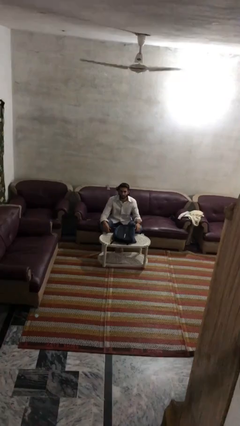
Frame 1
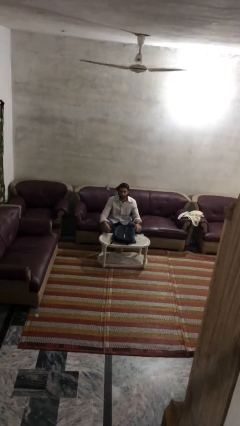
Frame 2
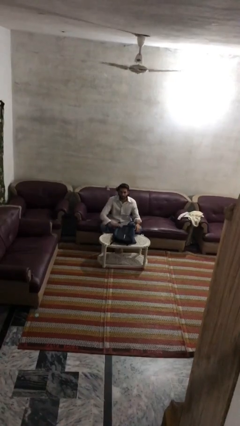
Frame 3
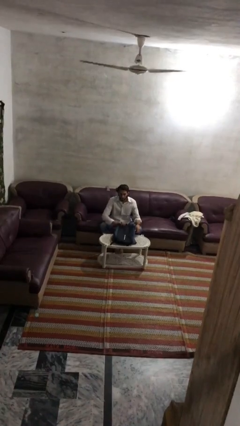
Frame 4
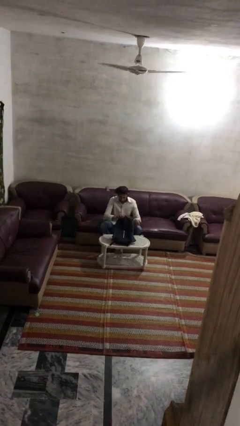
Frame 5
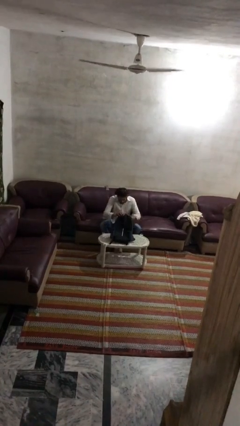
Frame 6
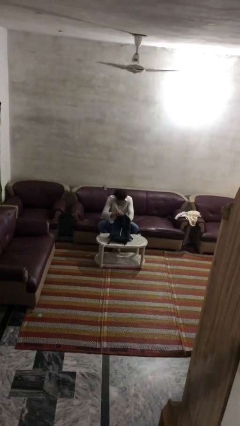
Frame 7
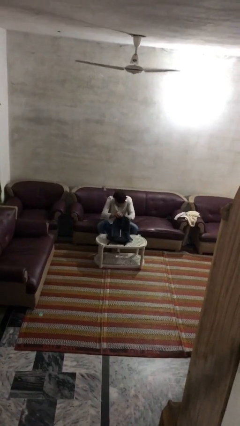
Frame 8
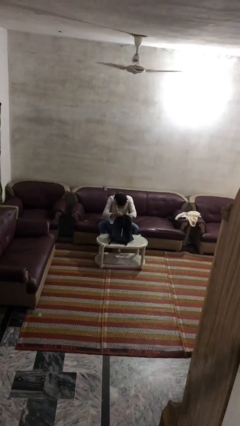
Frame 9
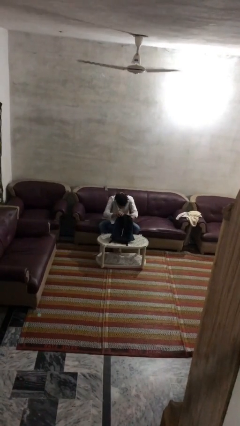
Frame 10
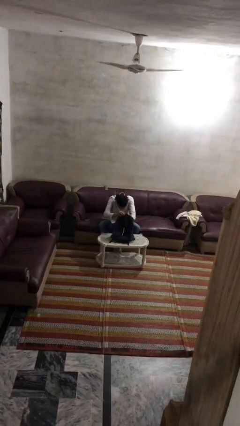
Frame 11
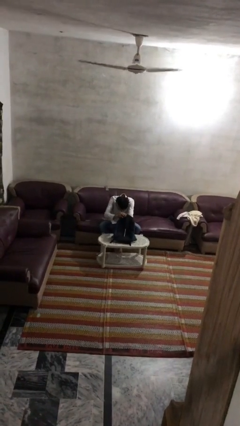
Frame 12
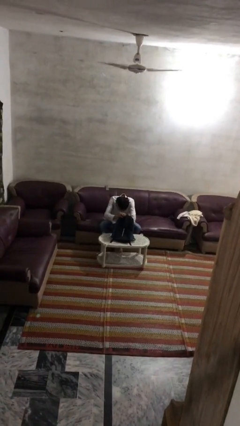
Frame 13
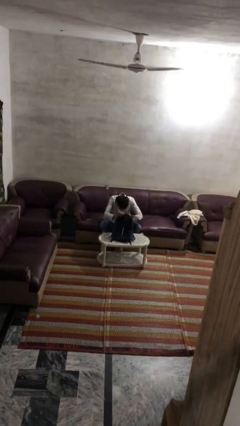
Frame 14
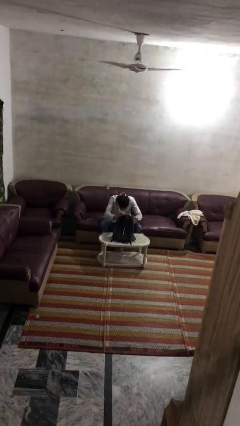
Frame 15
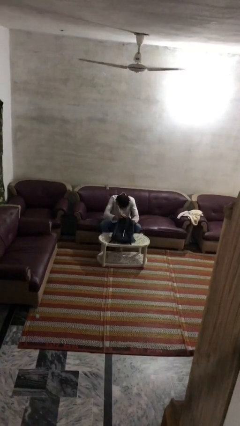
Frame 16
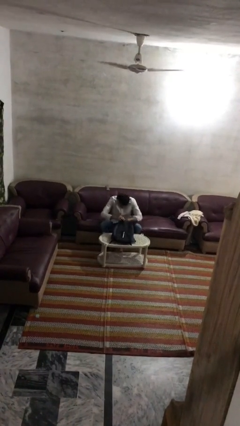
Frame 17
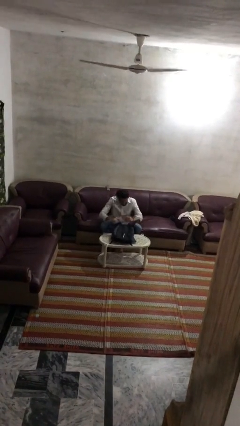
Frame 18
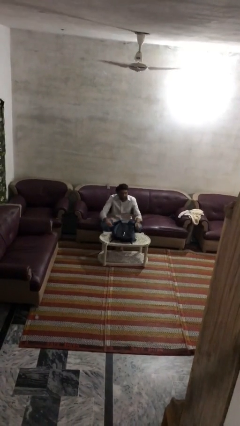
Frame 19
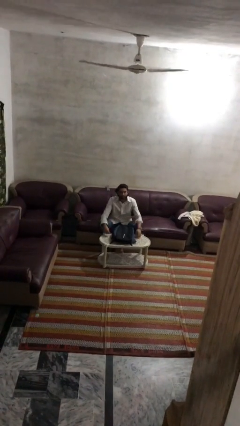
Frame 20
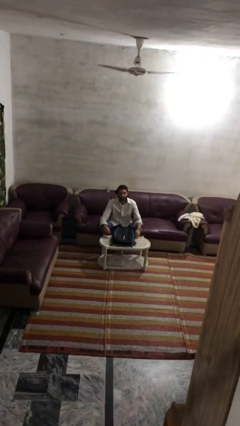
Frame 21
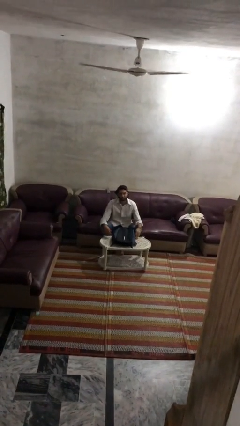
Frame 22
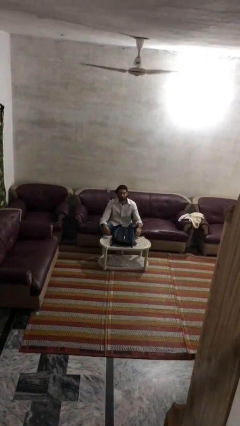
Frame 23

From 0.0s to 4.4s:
person searches in bag

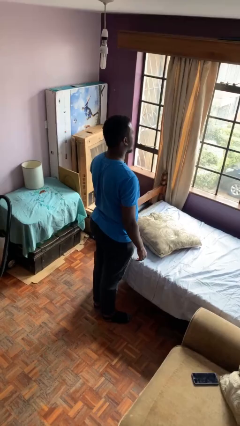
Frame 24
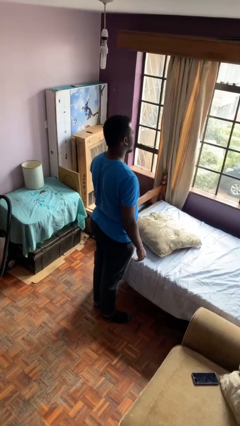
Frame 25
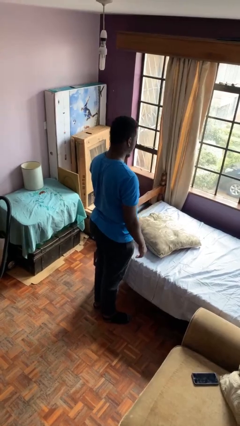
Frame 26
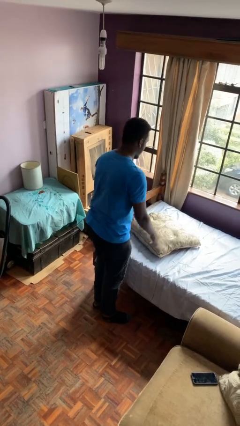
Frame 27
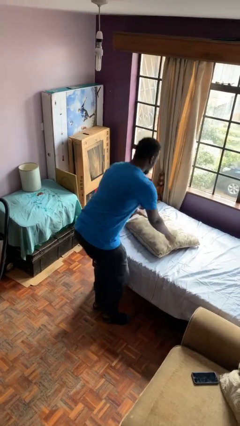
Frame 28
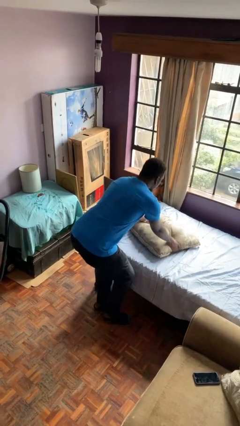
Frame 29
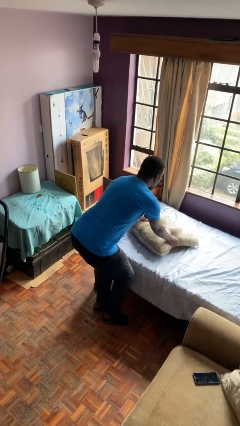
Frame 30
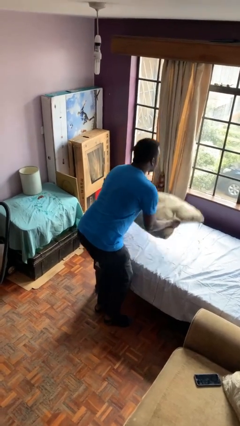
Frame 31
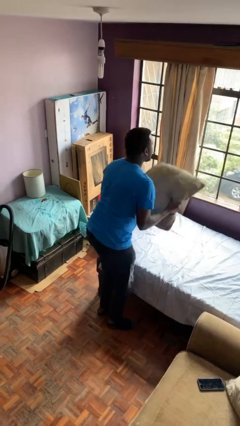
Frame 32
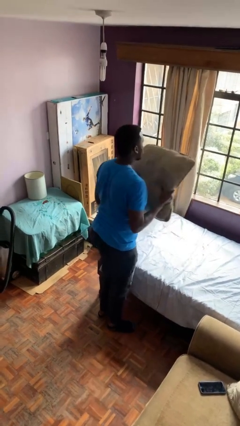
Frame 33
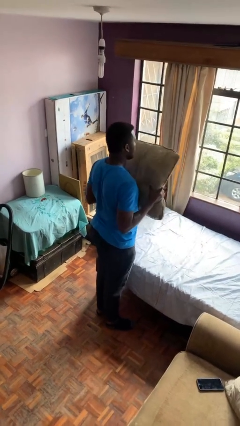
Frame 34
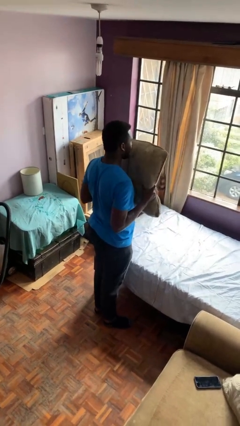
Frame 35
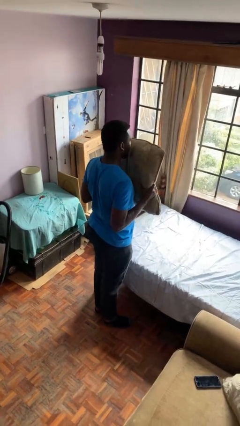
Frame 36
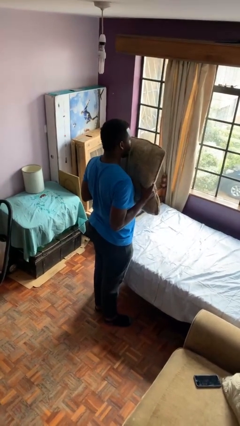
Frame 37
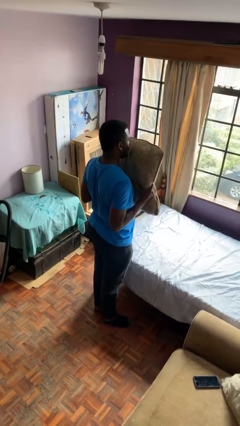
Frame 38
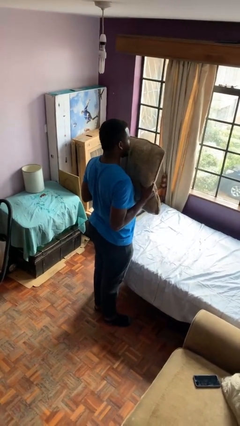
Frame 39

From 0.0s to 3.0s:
person picks up object from bed

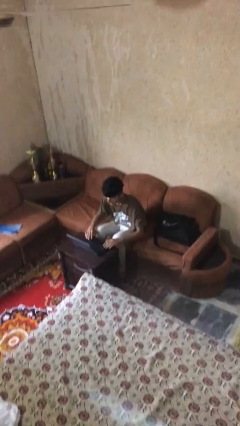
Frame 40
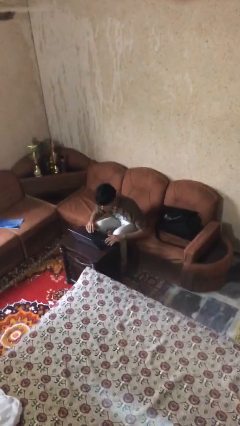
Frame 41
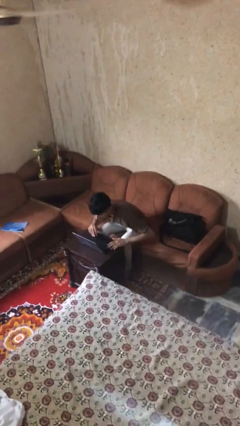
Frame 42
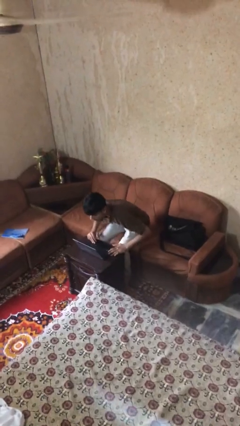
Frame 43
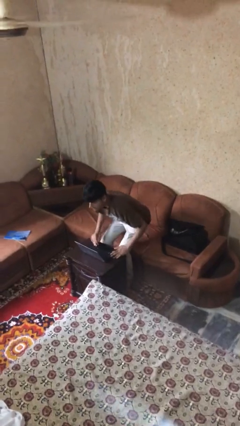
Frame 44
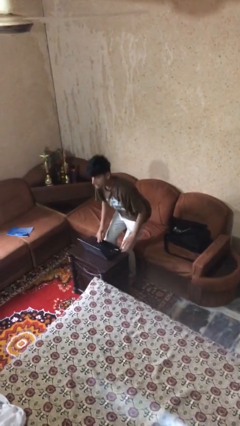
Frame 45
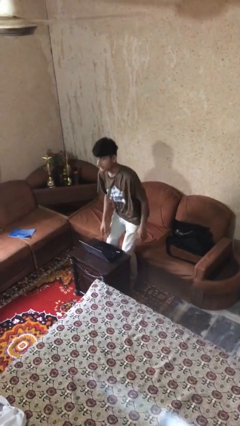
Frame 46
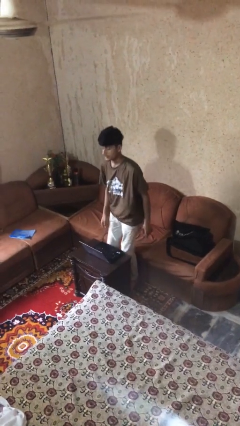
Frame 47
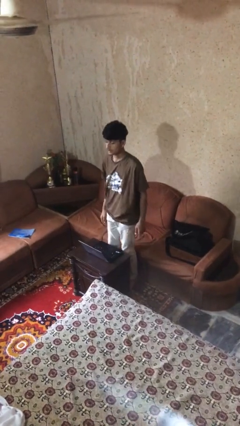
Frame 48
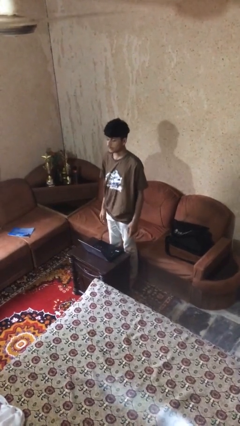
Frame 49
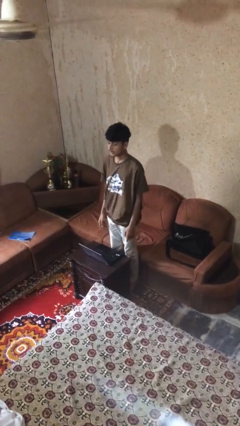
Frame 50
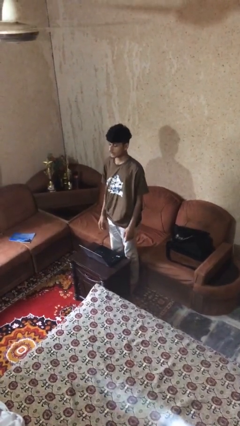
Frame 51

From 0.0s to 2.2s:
person stands up

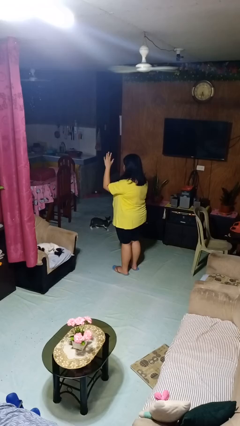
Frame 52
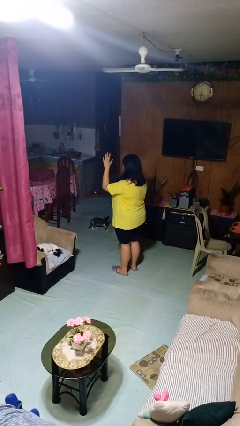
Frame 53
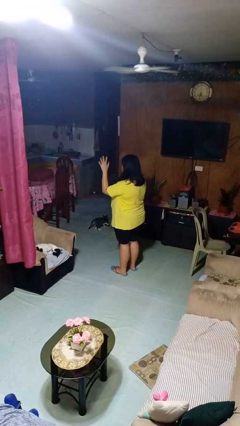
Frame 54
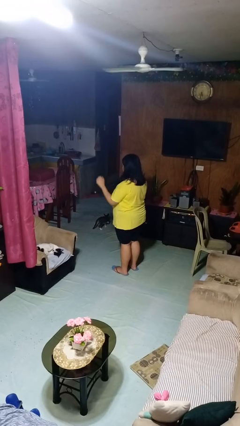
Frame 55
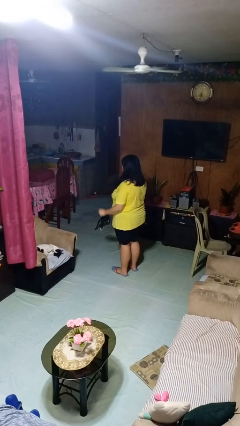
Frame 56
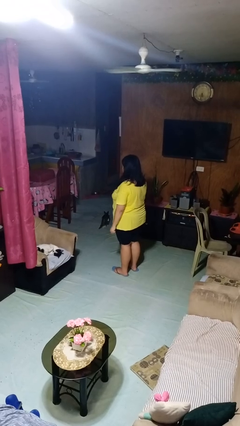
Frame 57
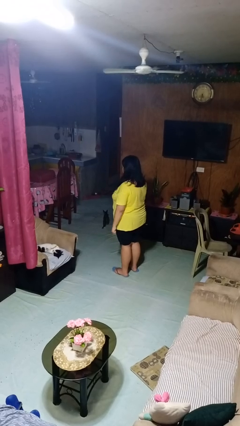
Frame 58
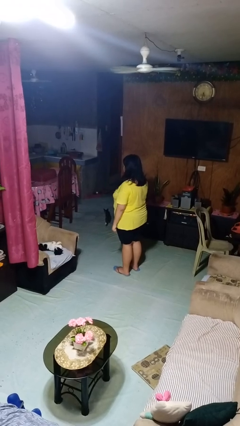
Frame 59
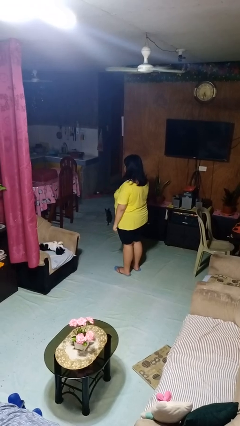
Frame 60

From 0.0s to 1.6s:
person gestures lower hand

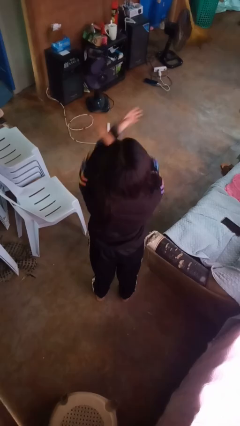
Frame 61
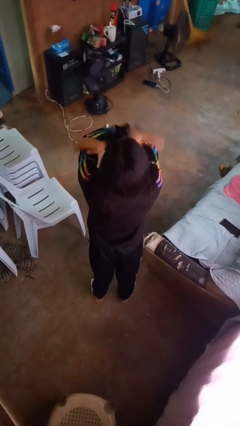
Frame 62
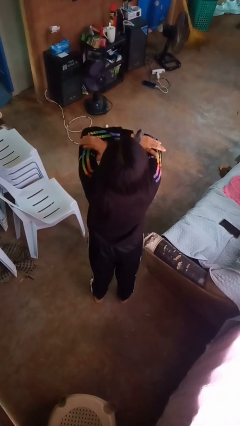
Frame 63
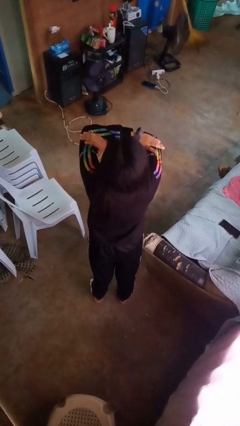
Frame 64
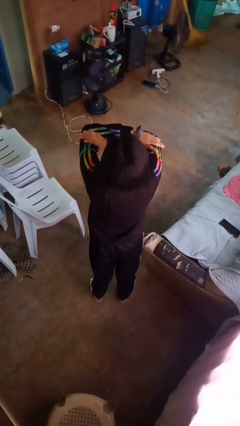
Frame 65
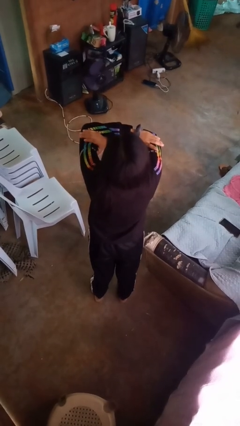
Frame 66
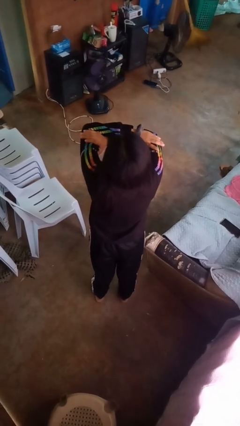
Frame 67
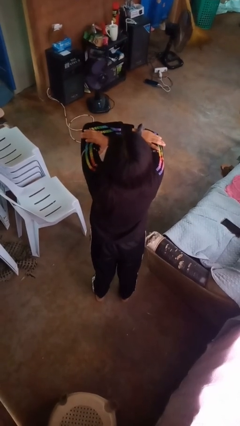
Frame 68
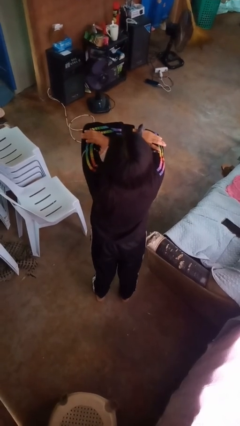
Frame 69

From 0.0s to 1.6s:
person gestures arms x

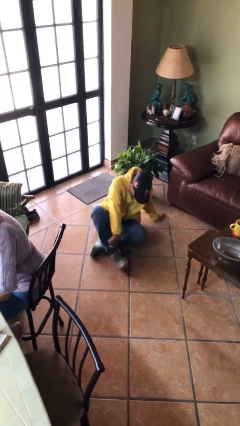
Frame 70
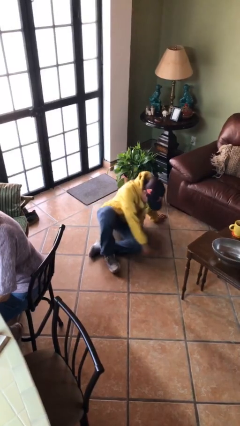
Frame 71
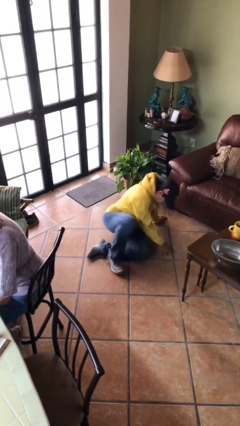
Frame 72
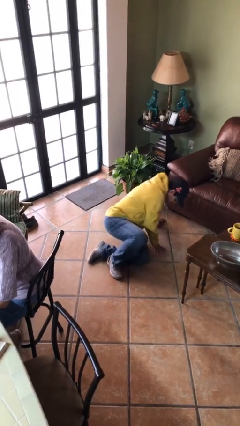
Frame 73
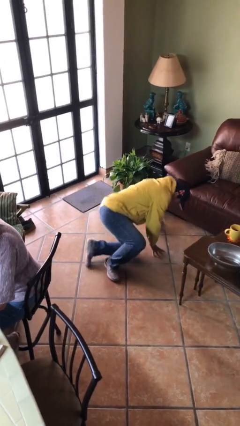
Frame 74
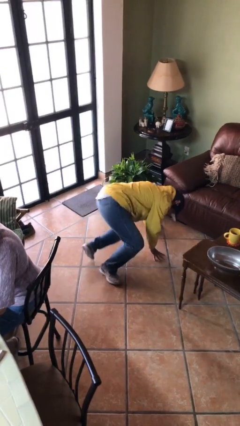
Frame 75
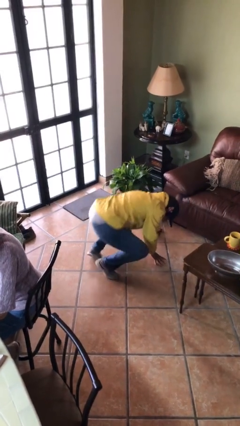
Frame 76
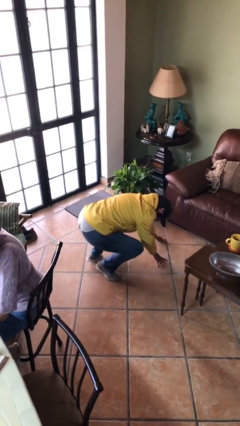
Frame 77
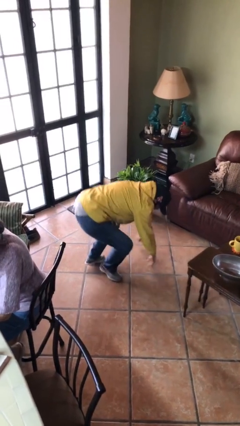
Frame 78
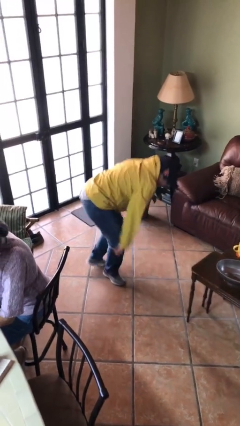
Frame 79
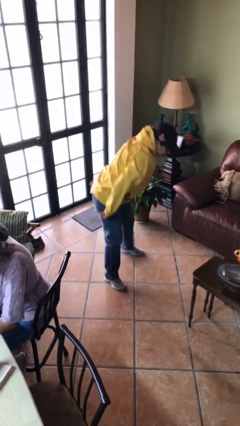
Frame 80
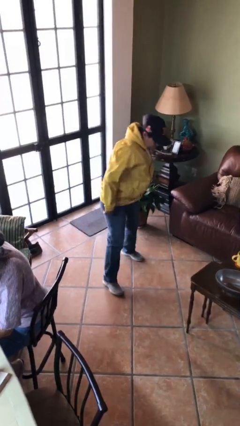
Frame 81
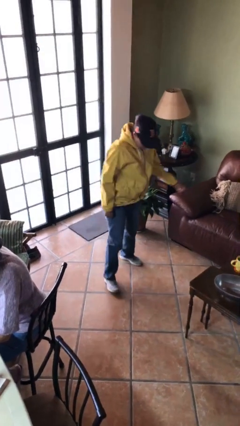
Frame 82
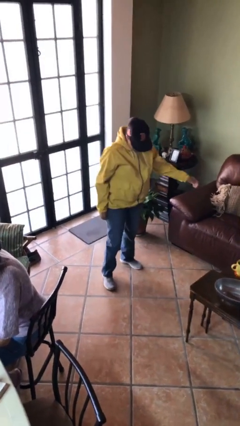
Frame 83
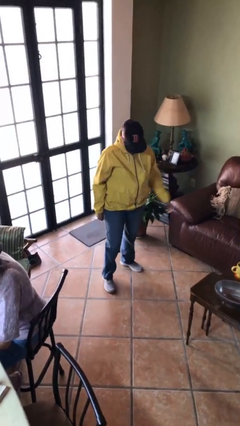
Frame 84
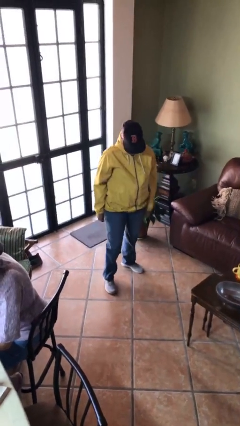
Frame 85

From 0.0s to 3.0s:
person stands up from floor

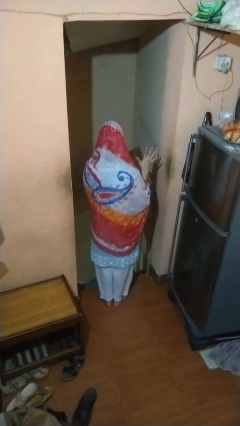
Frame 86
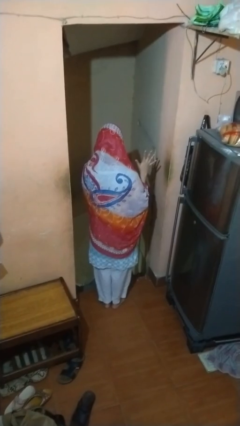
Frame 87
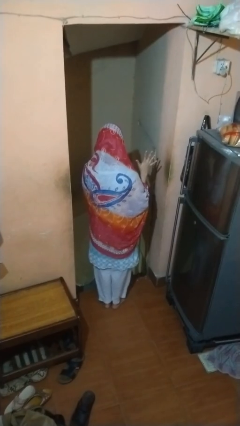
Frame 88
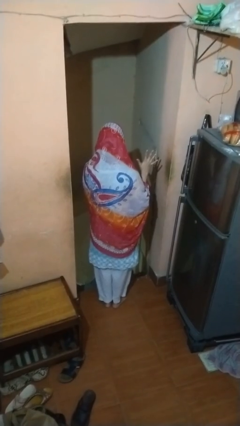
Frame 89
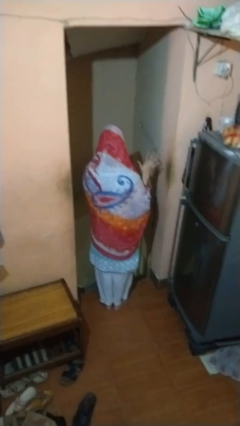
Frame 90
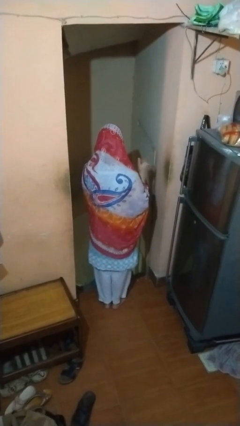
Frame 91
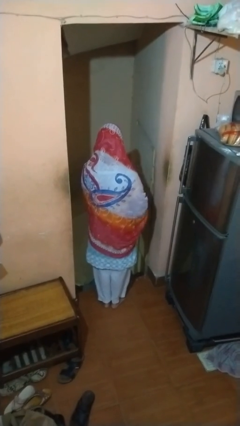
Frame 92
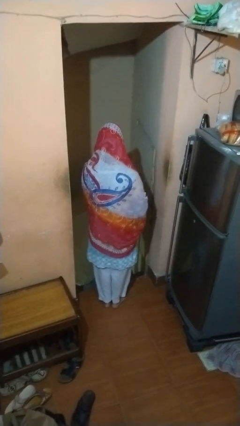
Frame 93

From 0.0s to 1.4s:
person gestures number five

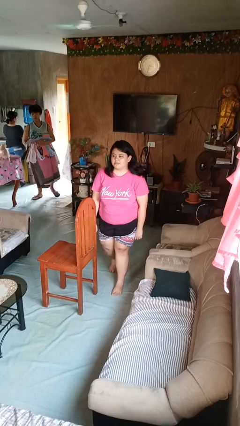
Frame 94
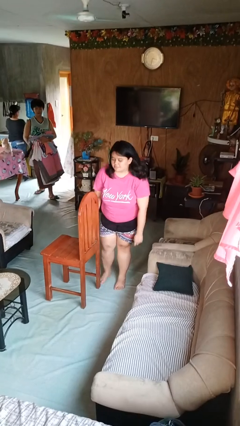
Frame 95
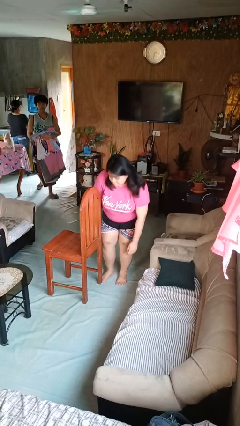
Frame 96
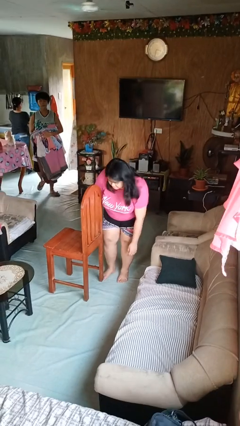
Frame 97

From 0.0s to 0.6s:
person stubs toe
